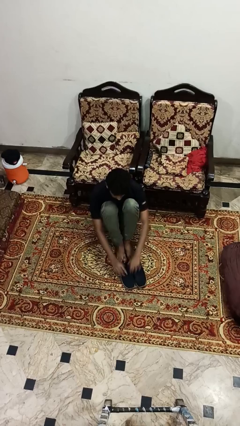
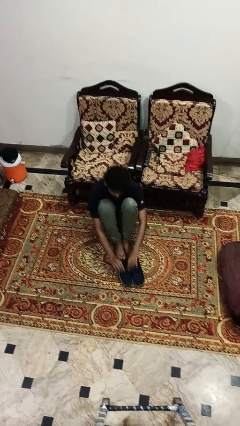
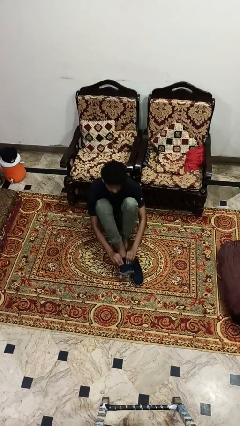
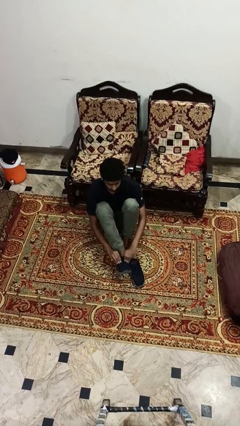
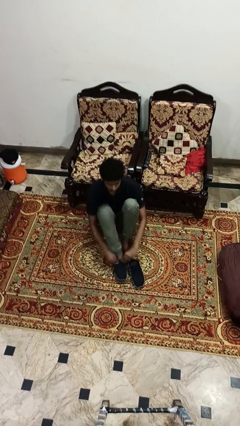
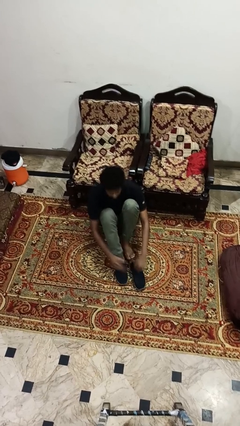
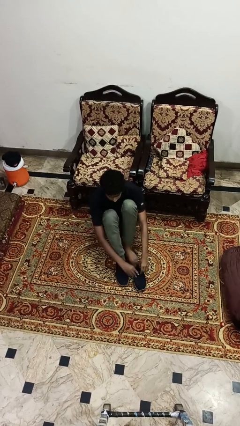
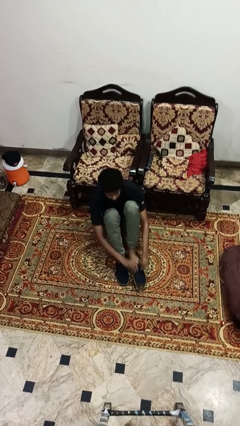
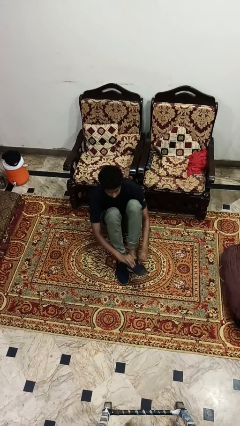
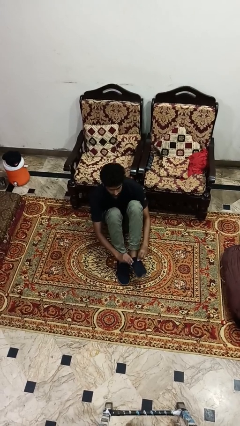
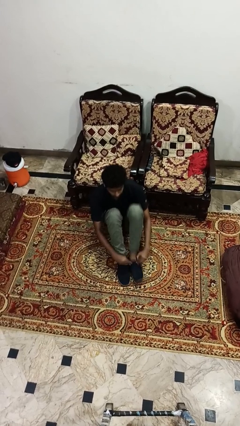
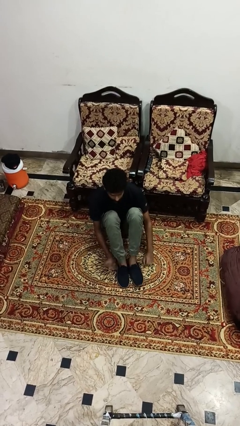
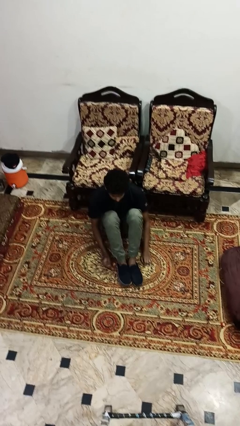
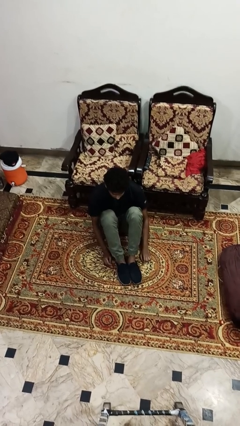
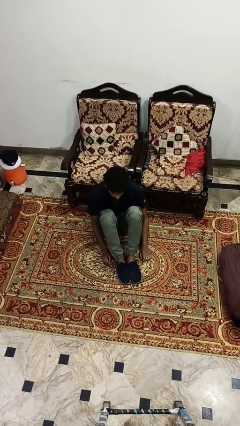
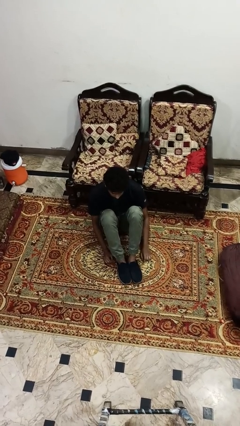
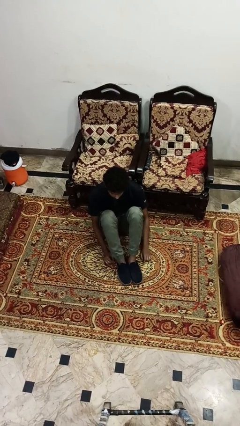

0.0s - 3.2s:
person puts on shoes

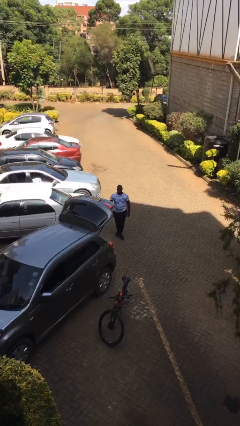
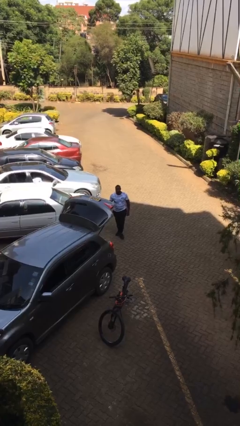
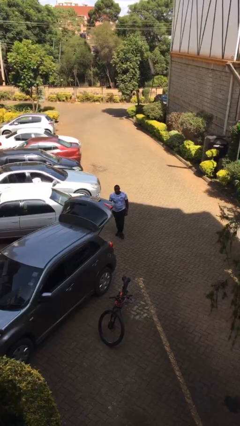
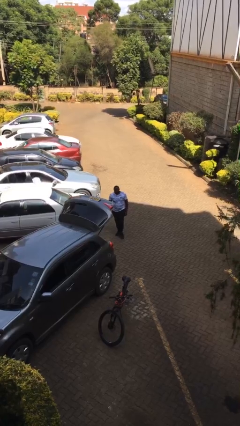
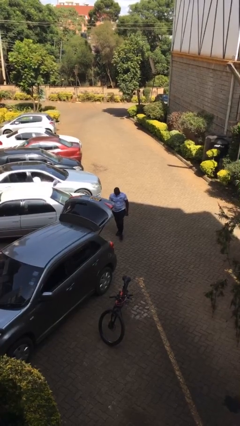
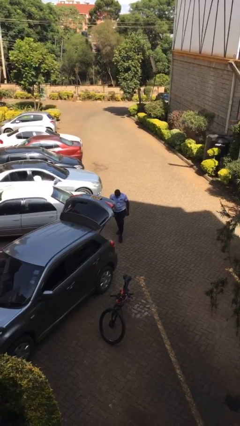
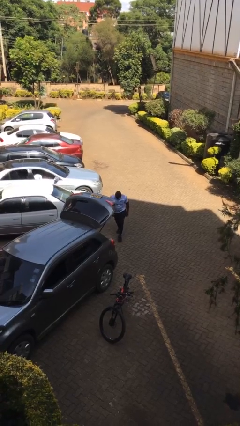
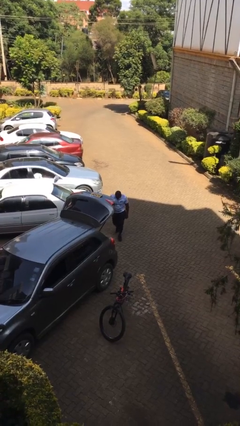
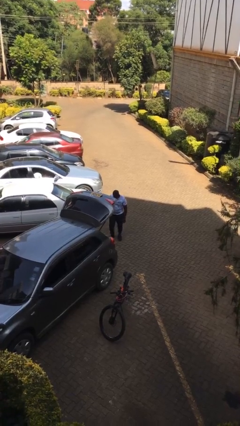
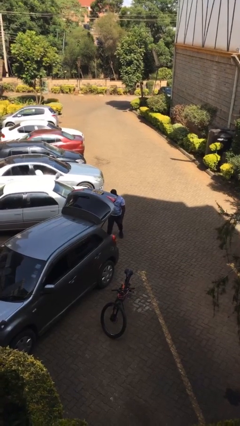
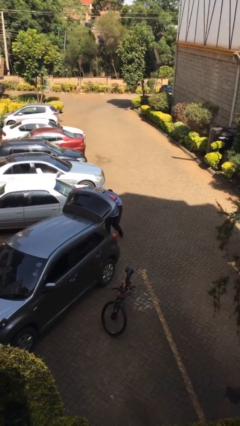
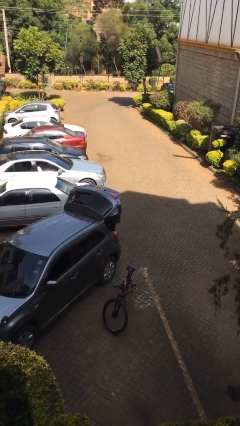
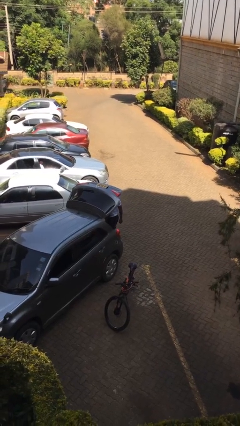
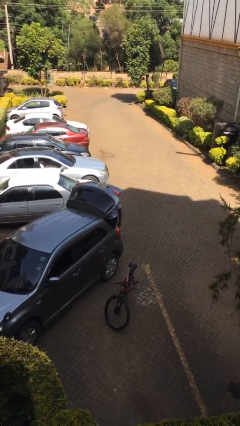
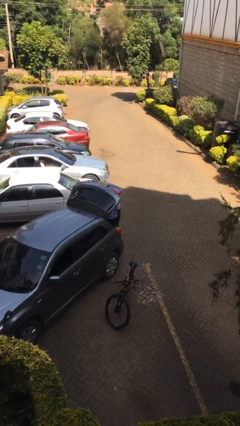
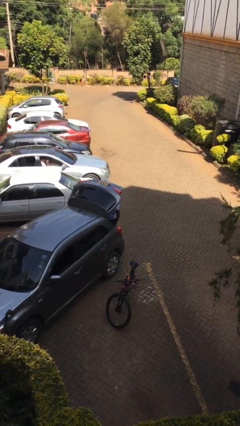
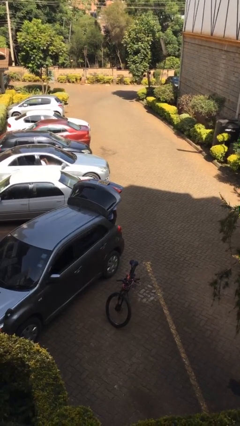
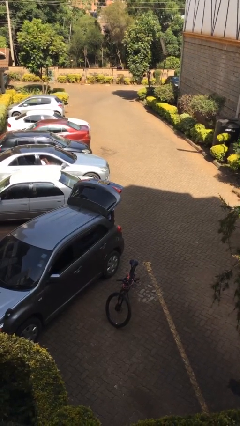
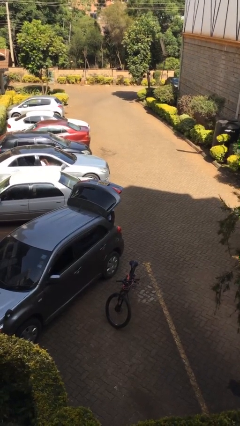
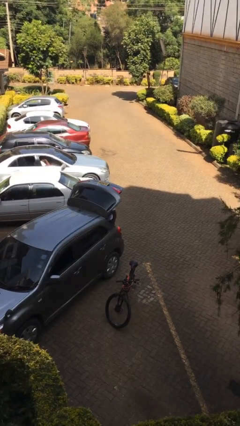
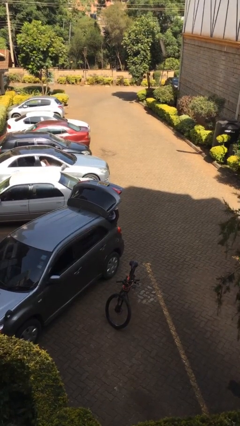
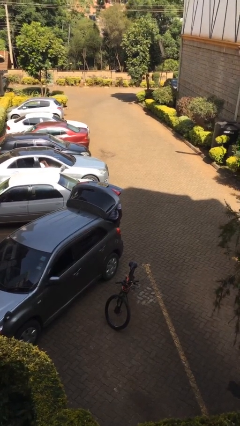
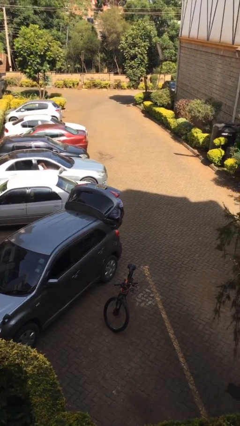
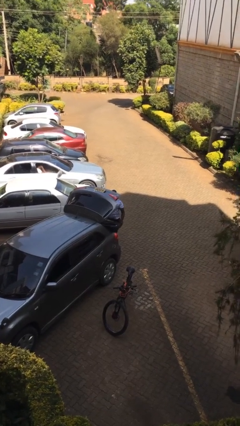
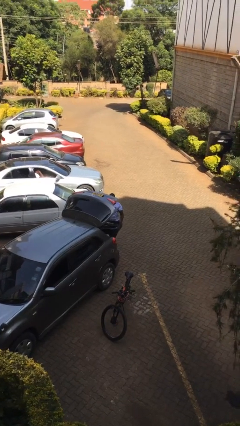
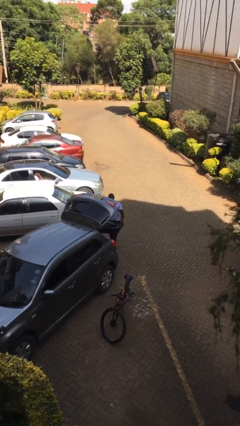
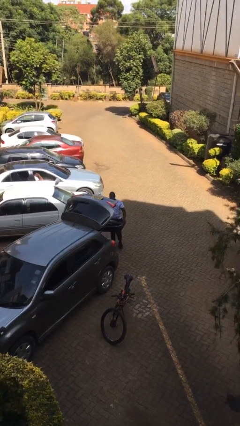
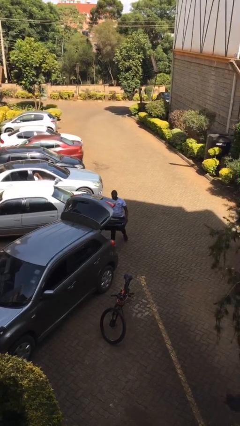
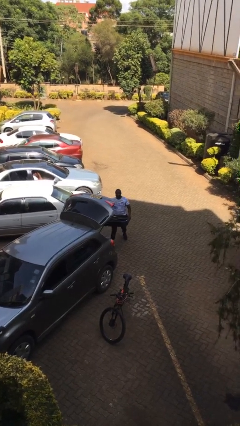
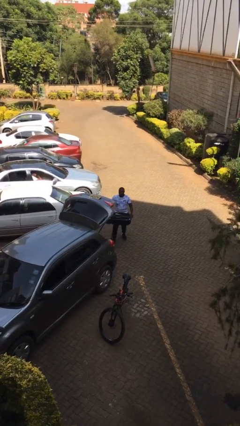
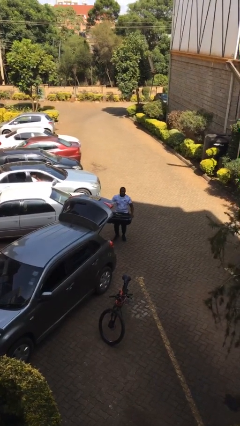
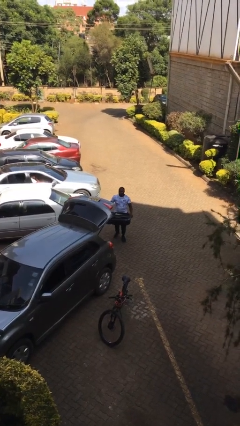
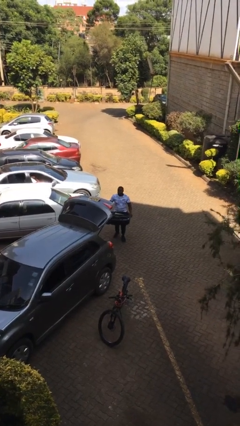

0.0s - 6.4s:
person unloads car

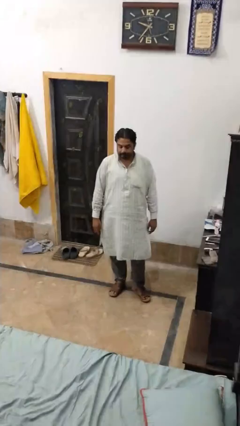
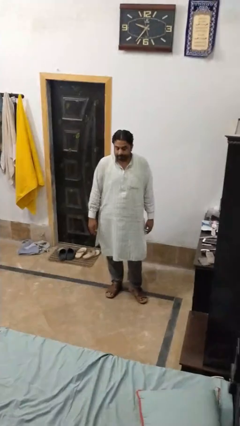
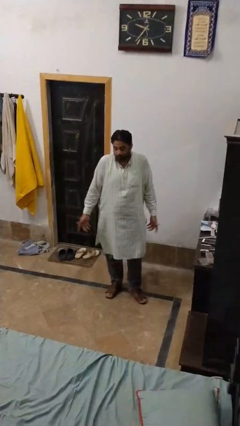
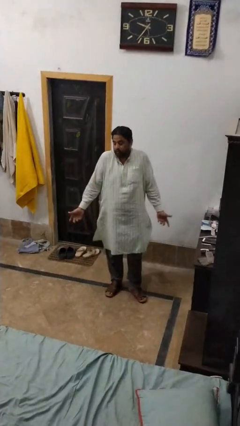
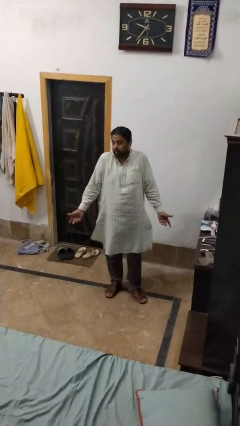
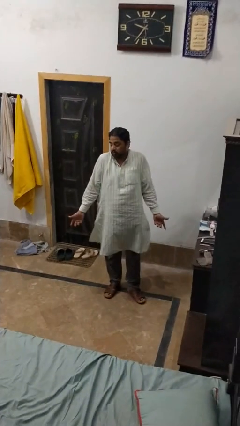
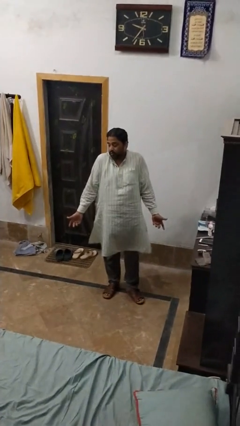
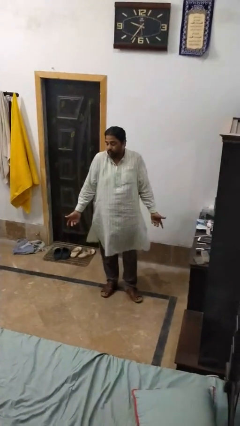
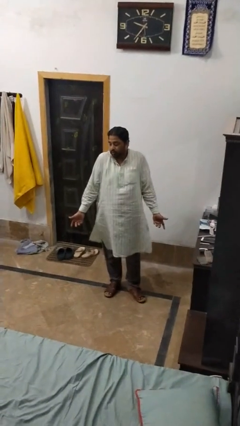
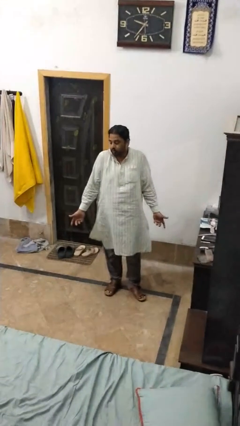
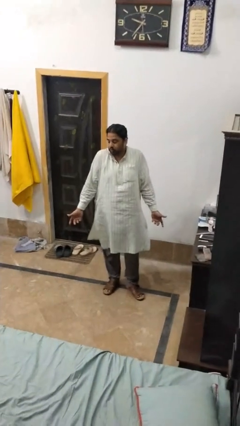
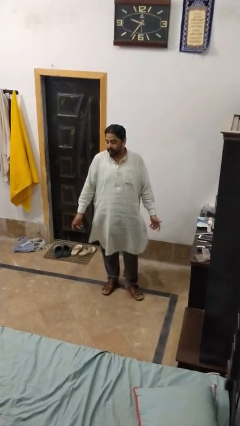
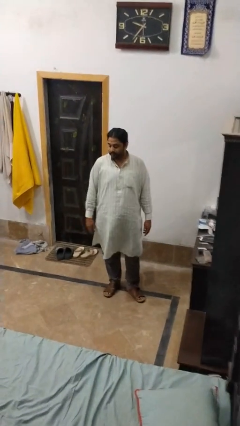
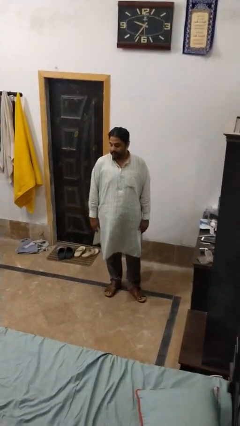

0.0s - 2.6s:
person shrugs

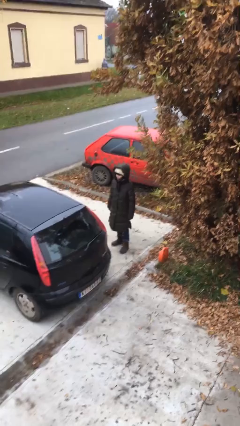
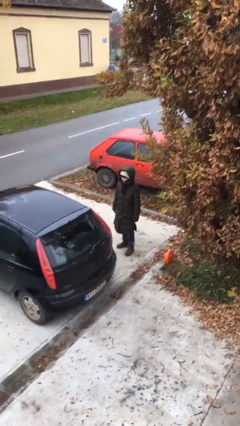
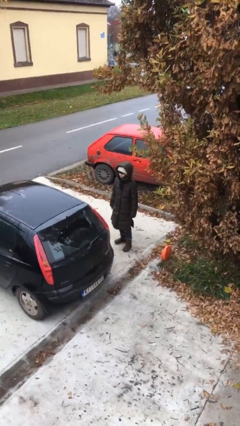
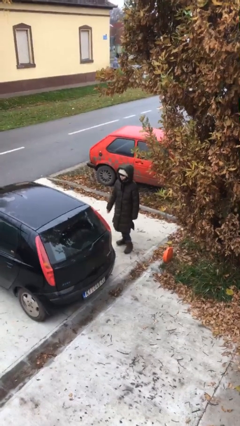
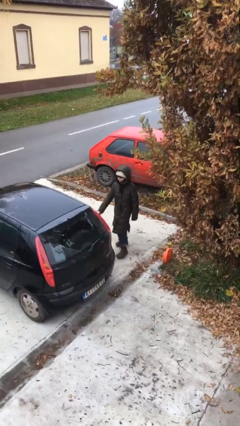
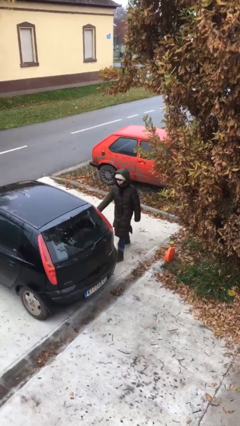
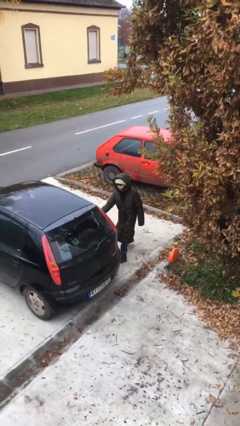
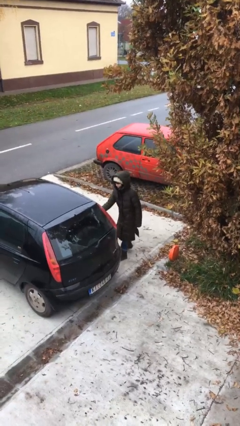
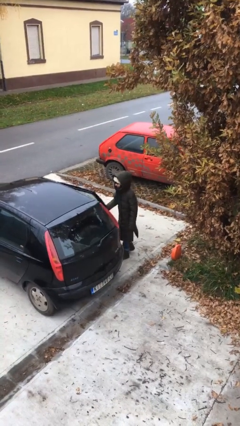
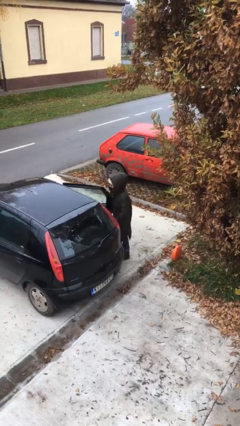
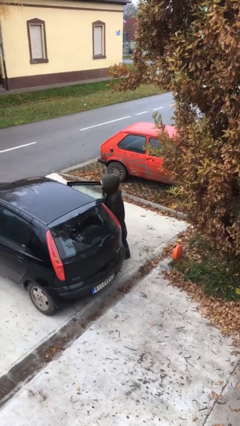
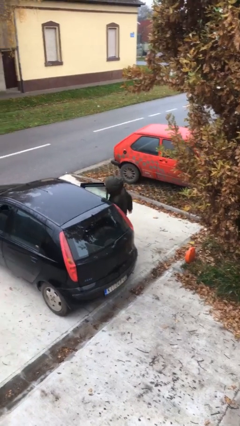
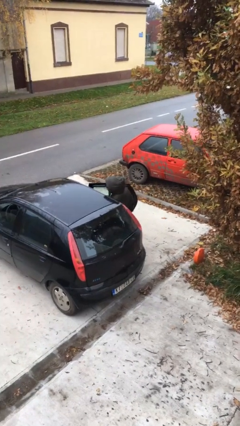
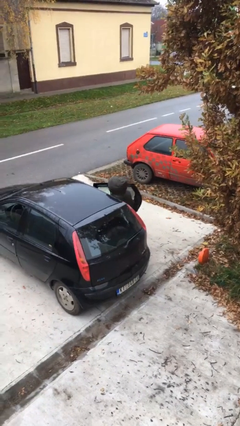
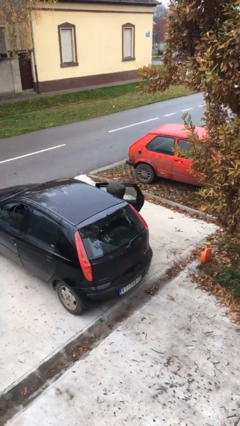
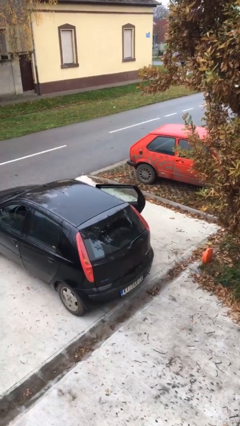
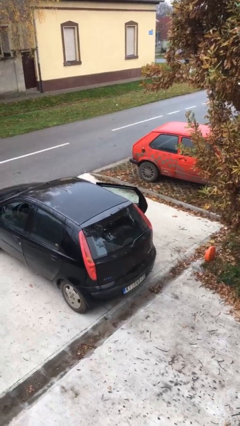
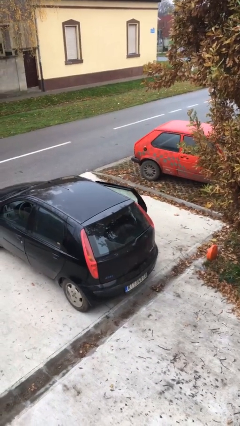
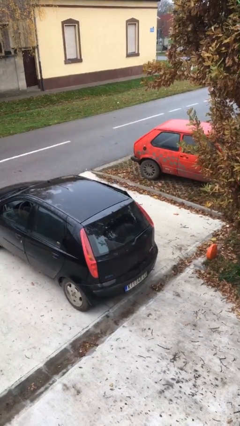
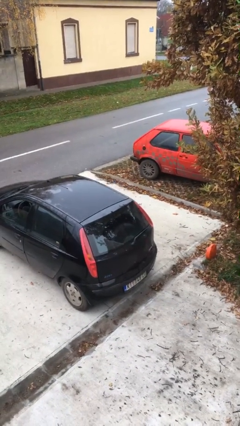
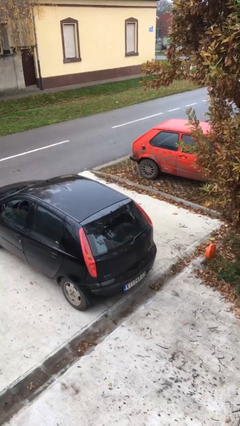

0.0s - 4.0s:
person enters car

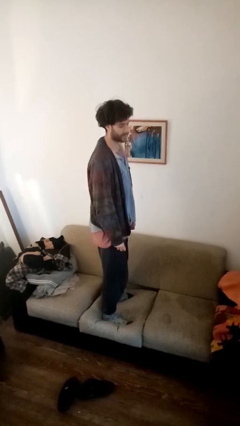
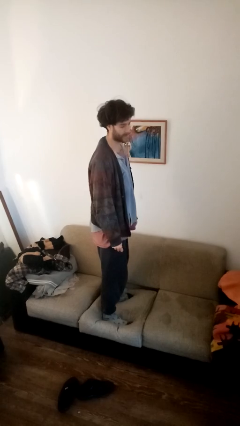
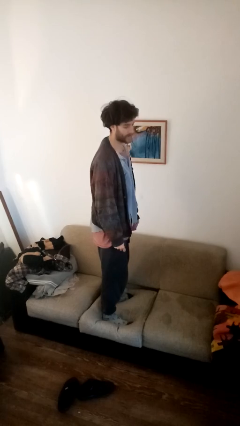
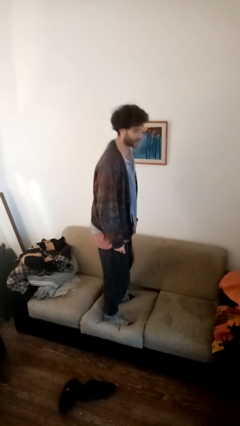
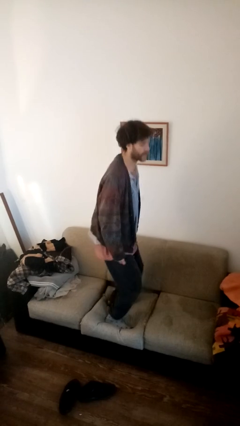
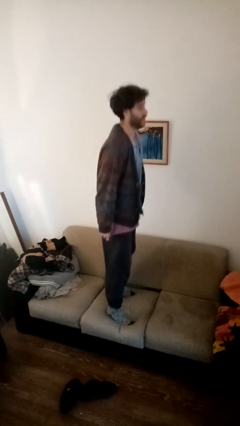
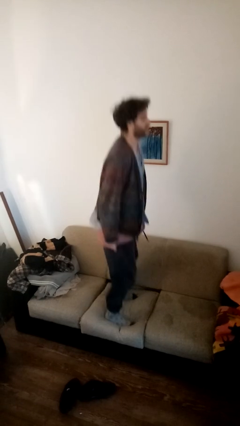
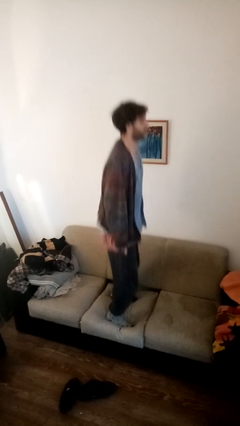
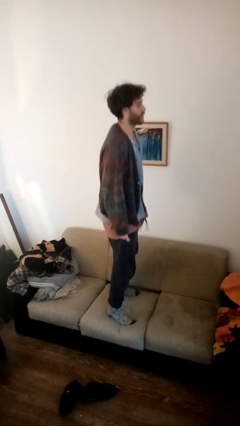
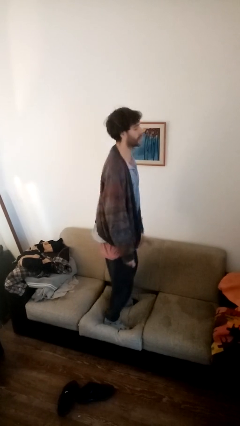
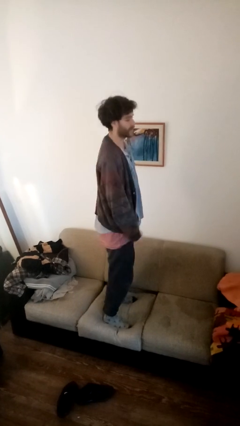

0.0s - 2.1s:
person jumps on couch
